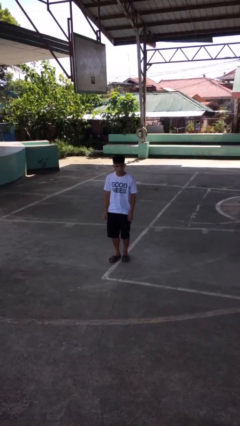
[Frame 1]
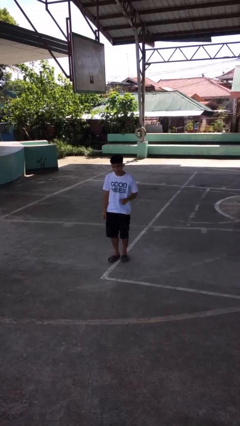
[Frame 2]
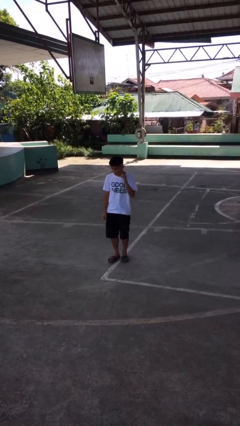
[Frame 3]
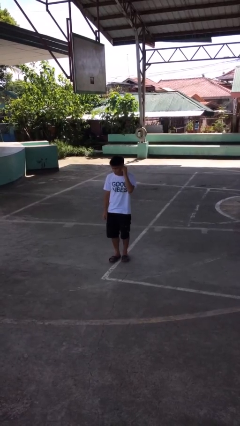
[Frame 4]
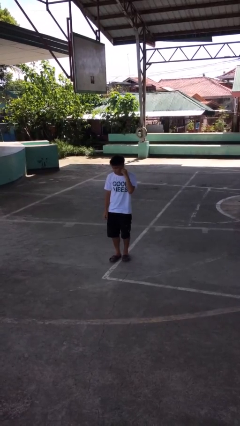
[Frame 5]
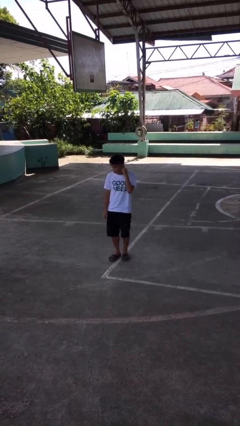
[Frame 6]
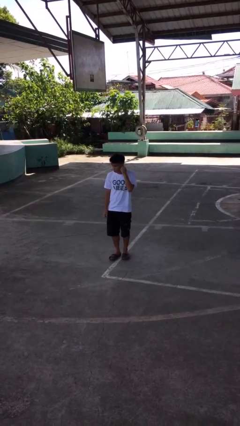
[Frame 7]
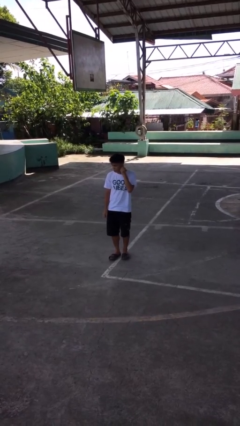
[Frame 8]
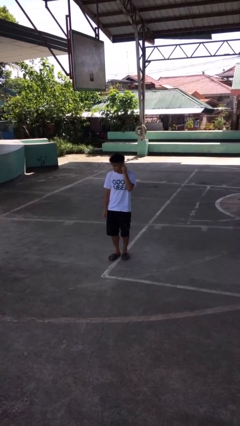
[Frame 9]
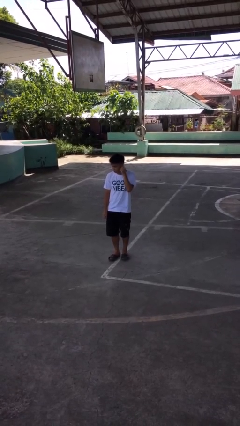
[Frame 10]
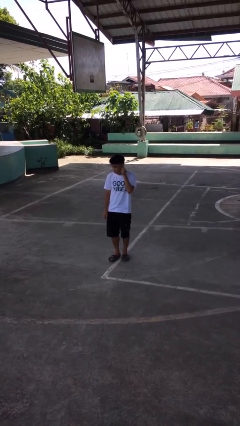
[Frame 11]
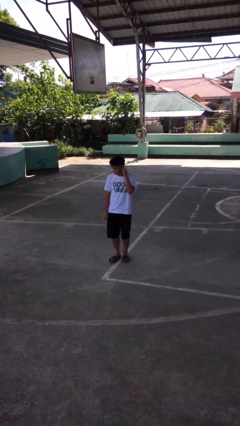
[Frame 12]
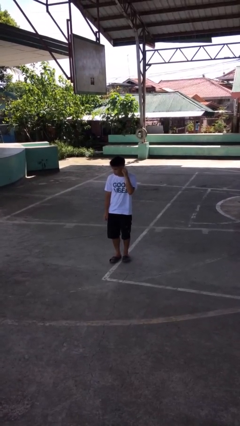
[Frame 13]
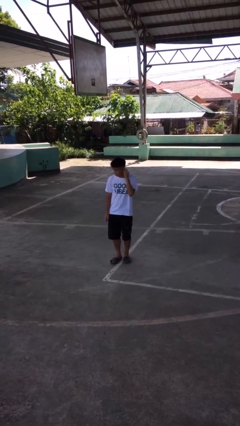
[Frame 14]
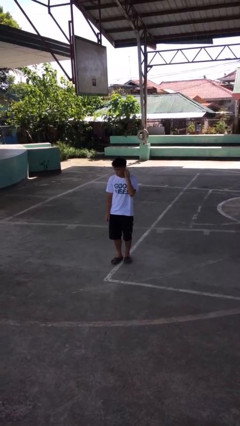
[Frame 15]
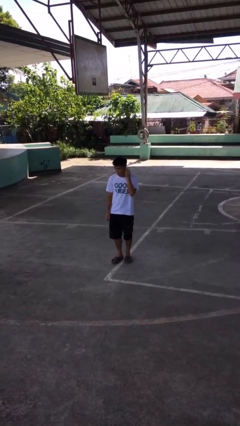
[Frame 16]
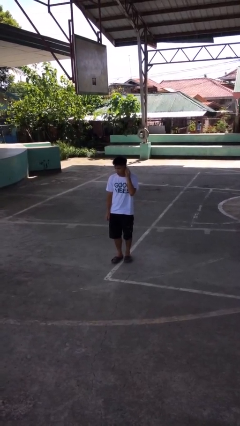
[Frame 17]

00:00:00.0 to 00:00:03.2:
person touches earlobe

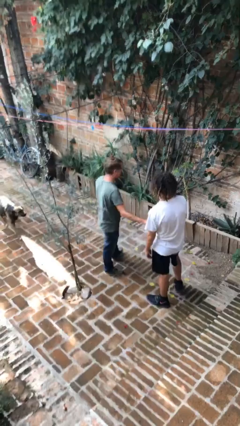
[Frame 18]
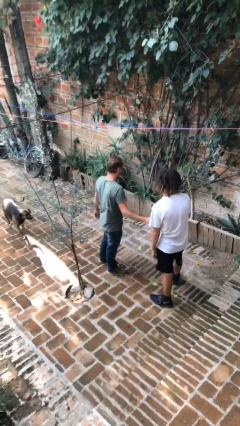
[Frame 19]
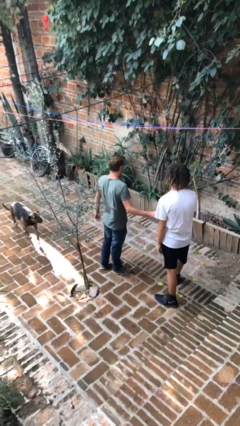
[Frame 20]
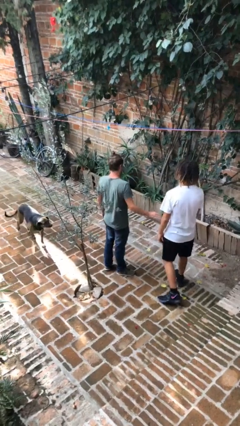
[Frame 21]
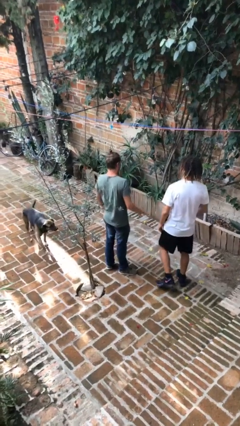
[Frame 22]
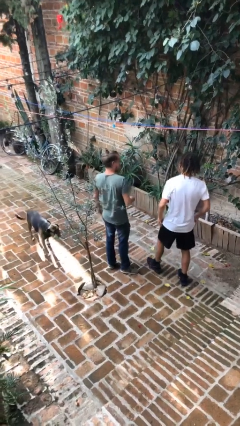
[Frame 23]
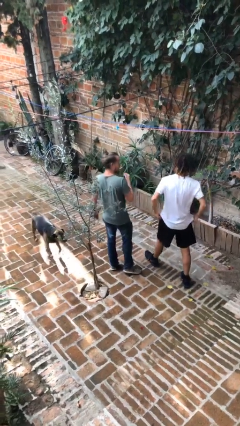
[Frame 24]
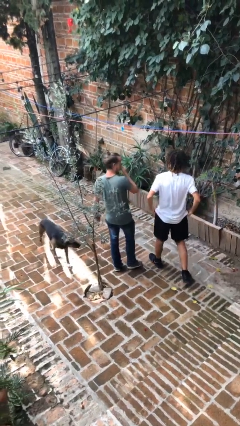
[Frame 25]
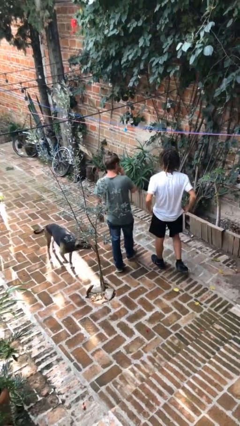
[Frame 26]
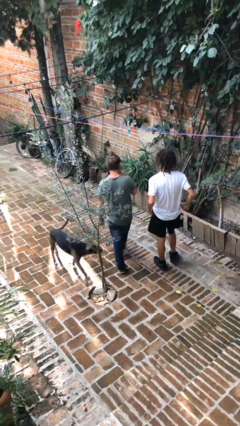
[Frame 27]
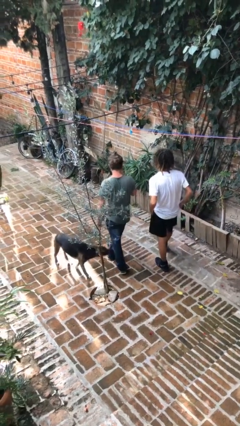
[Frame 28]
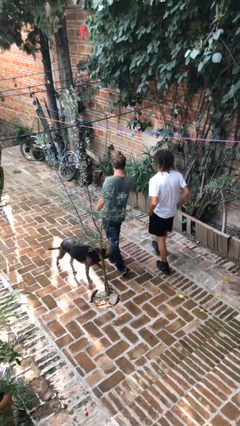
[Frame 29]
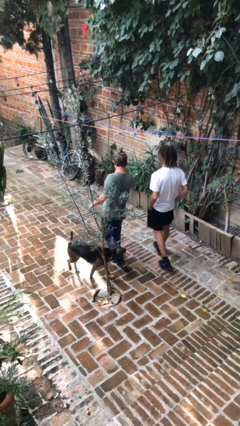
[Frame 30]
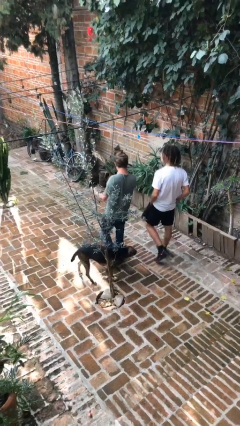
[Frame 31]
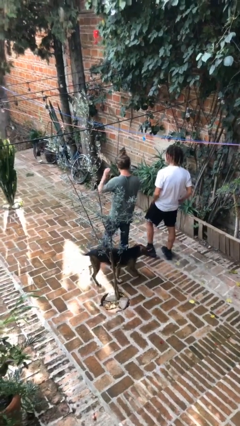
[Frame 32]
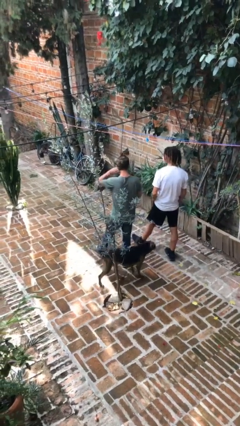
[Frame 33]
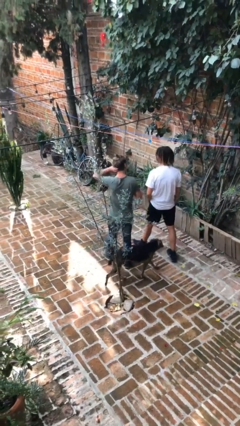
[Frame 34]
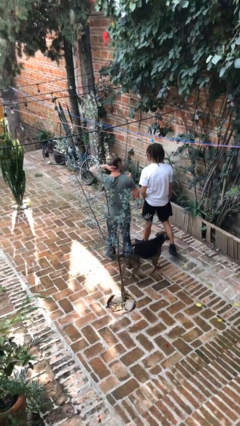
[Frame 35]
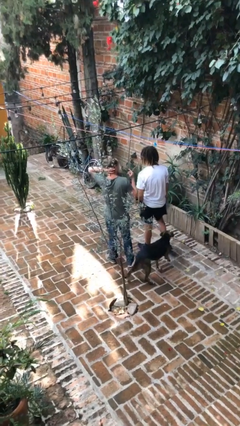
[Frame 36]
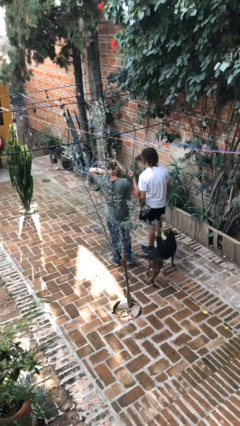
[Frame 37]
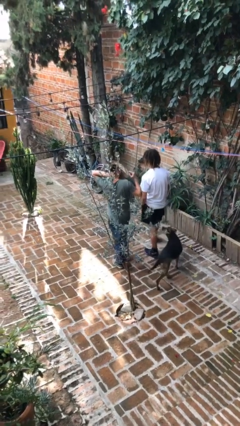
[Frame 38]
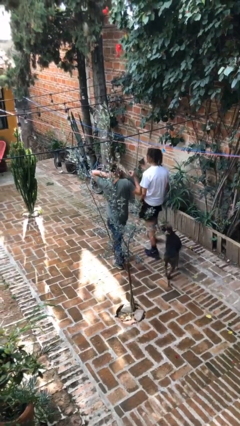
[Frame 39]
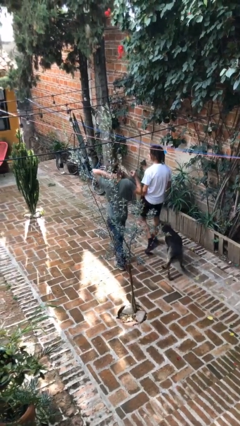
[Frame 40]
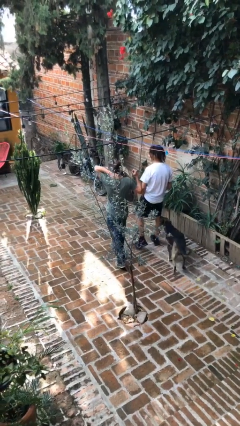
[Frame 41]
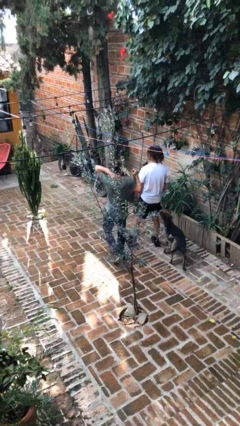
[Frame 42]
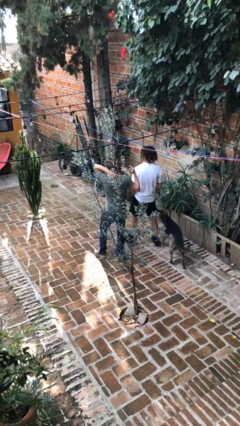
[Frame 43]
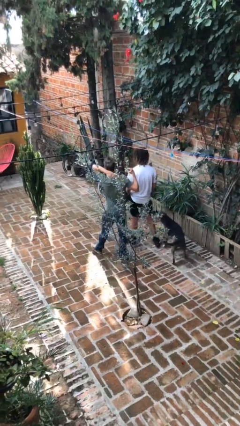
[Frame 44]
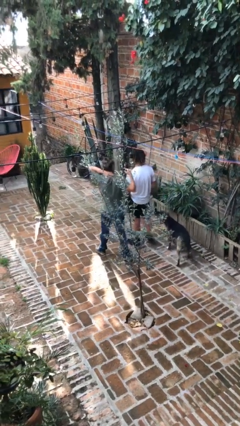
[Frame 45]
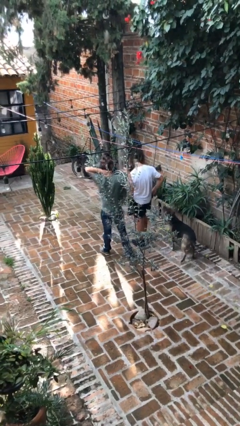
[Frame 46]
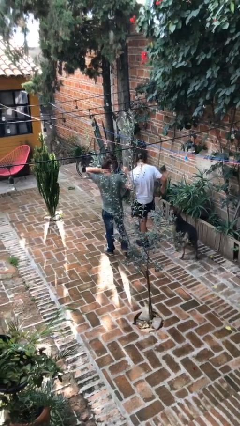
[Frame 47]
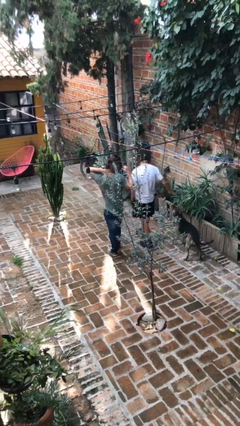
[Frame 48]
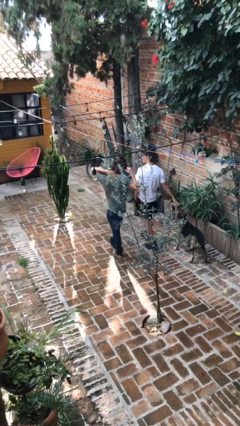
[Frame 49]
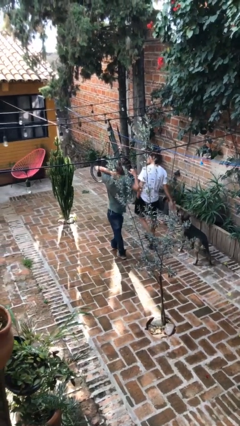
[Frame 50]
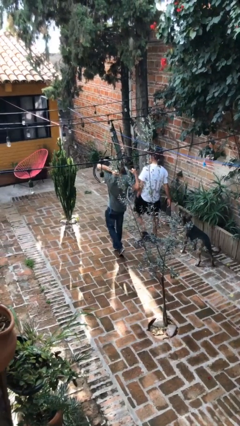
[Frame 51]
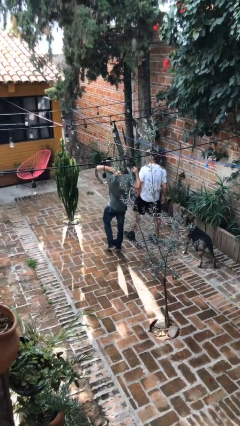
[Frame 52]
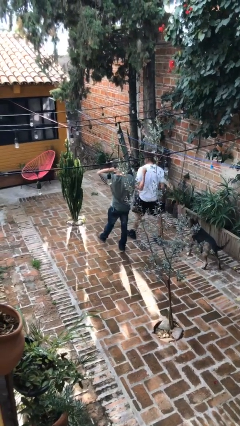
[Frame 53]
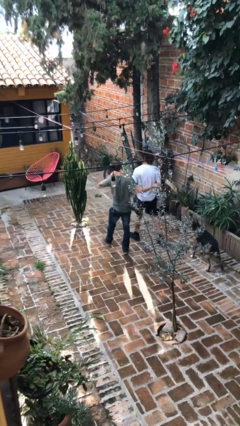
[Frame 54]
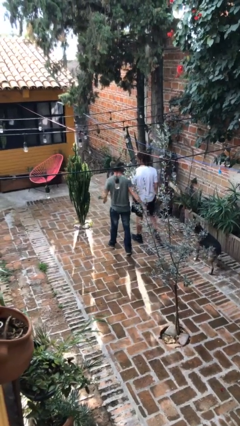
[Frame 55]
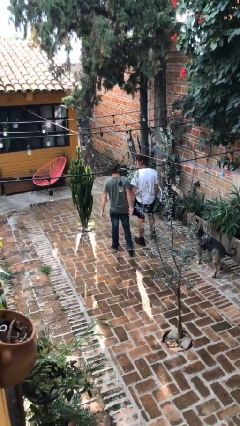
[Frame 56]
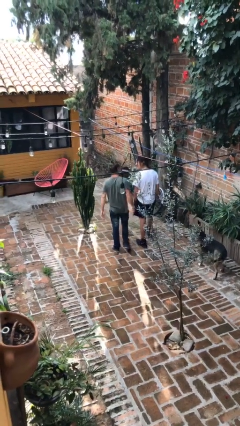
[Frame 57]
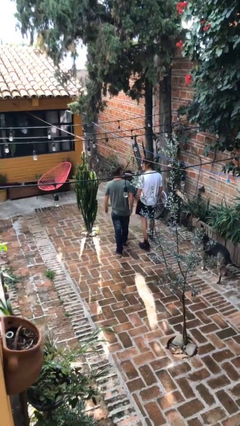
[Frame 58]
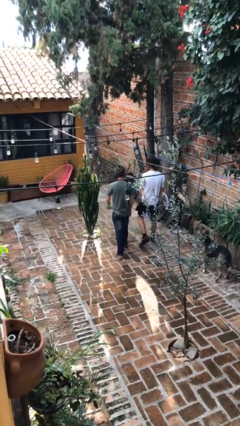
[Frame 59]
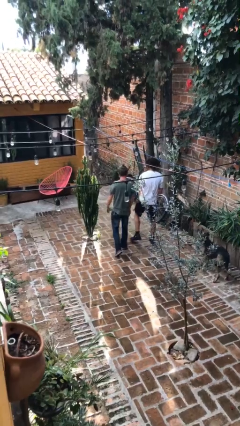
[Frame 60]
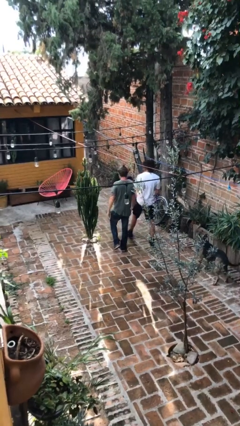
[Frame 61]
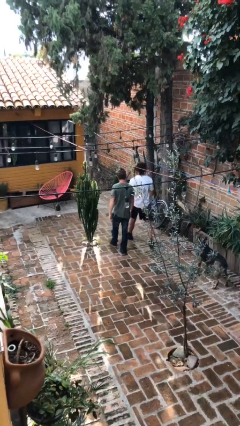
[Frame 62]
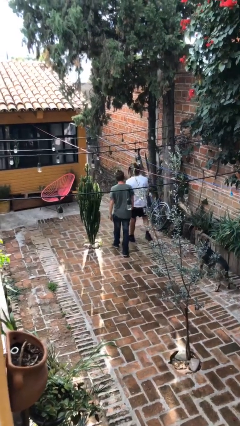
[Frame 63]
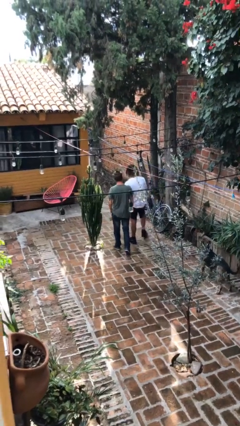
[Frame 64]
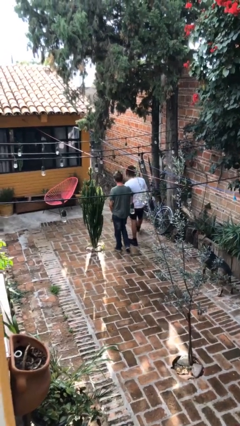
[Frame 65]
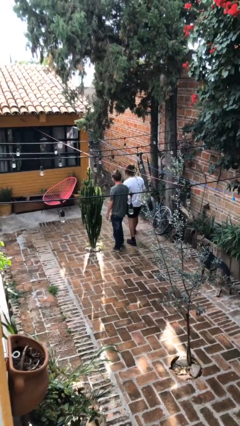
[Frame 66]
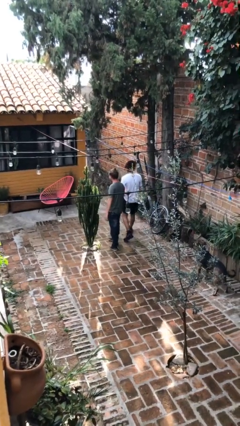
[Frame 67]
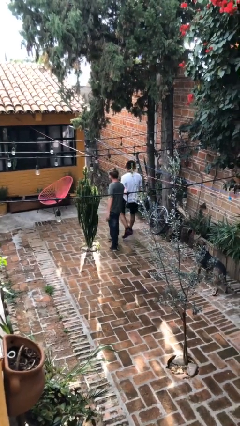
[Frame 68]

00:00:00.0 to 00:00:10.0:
person talks to person

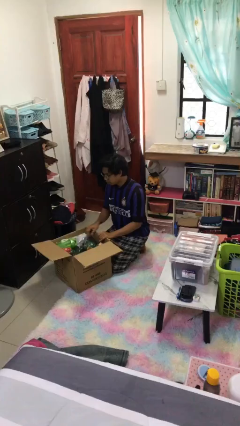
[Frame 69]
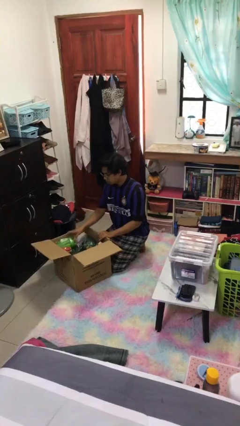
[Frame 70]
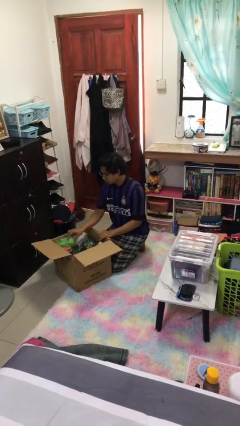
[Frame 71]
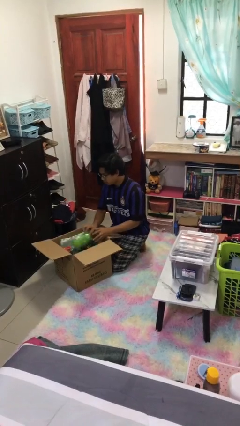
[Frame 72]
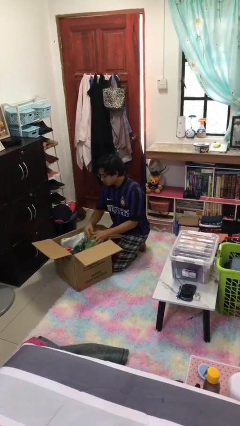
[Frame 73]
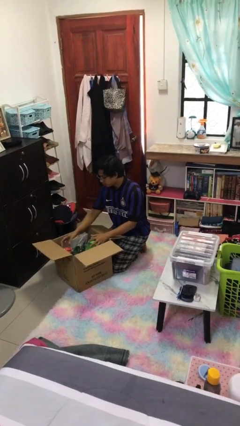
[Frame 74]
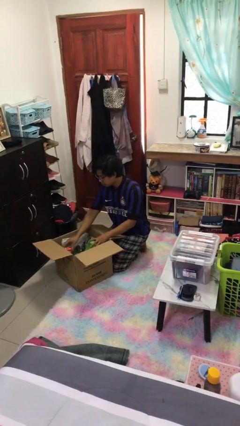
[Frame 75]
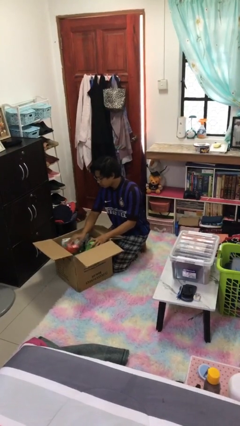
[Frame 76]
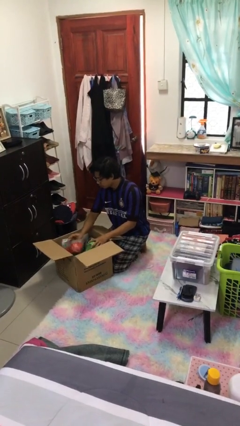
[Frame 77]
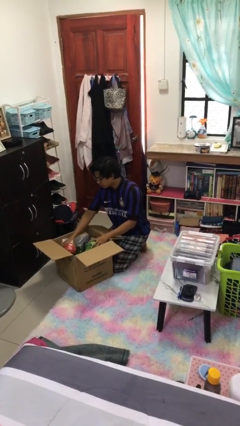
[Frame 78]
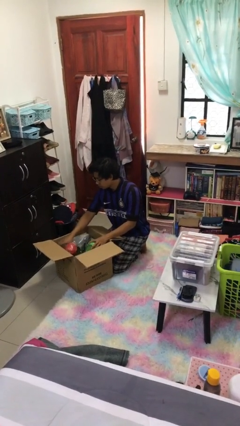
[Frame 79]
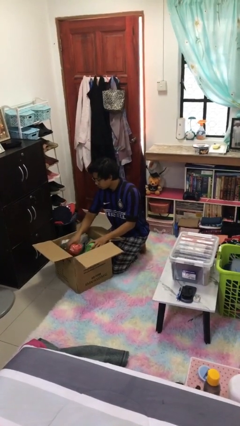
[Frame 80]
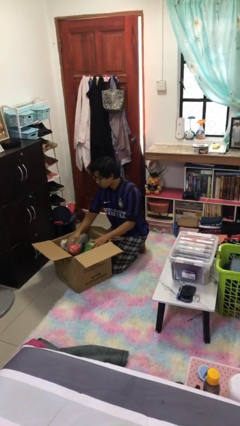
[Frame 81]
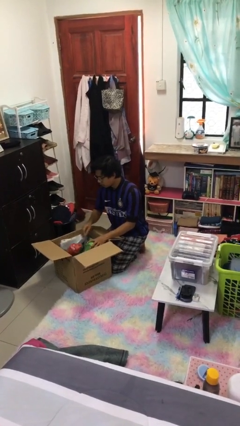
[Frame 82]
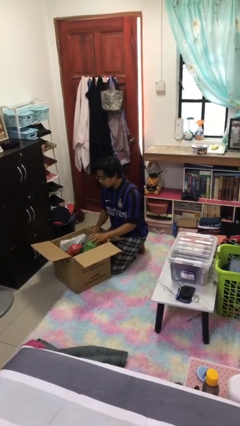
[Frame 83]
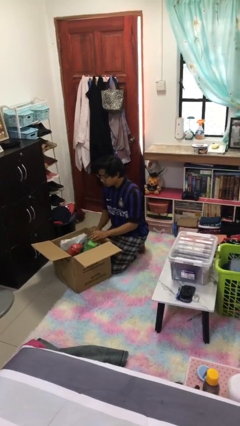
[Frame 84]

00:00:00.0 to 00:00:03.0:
person searches in box

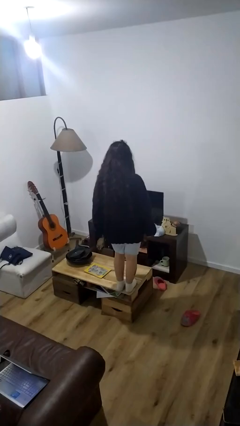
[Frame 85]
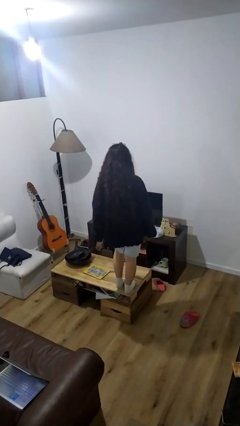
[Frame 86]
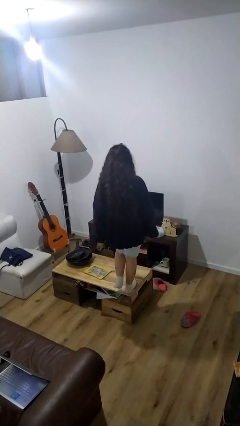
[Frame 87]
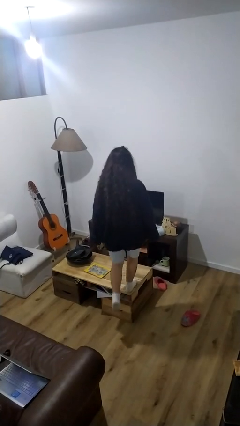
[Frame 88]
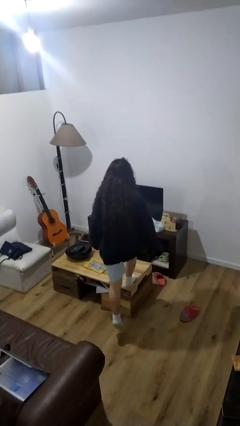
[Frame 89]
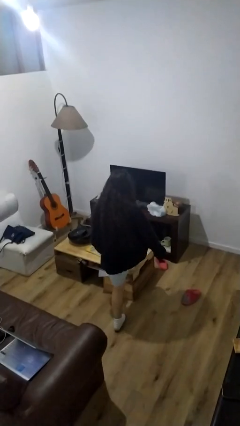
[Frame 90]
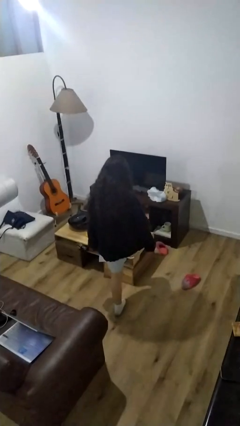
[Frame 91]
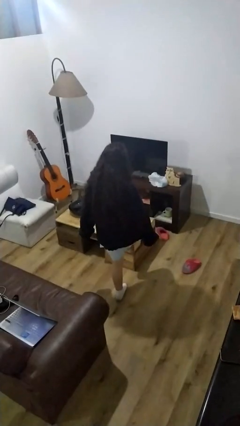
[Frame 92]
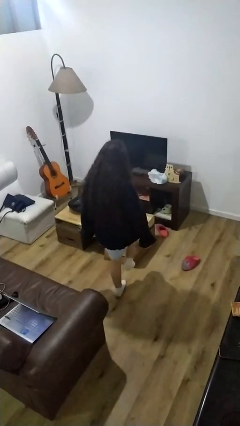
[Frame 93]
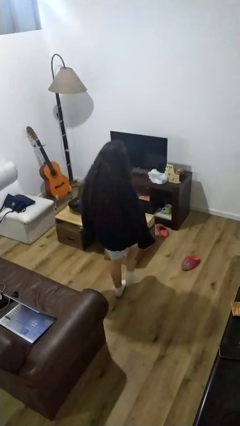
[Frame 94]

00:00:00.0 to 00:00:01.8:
person climbs off table
